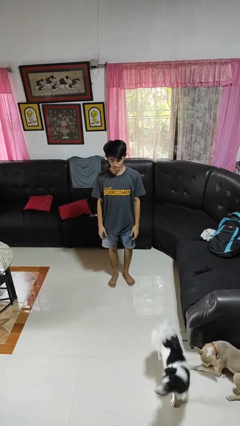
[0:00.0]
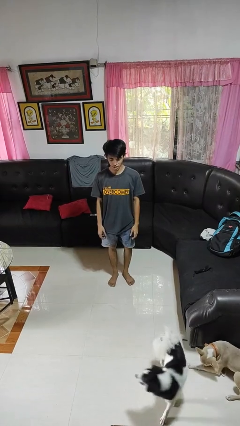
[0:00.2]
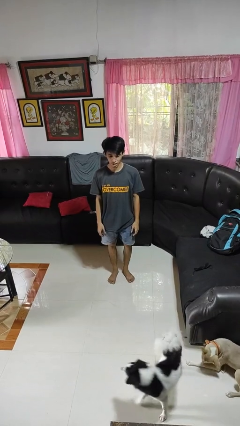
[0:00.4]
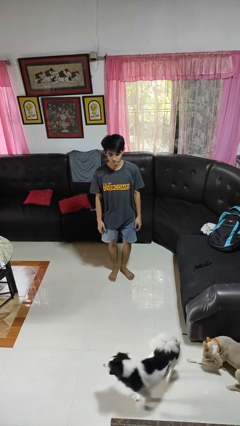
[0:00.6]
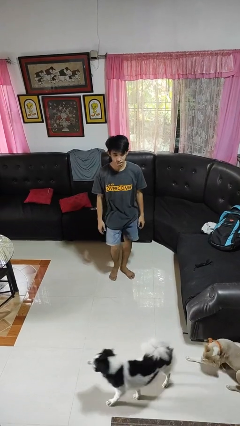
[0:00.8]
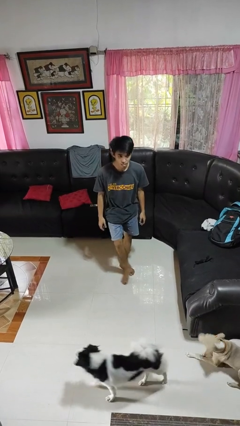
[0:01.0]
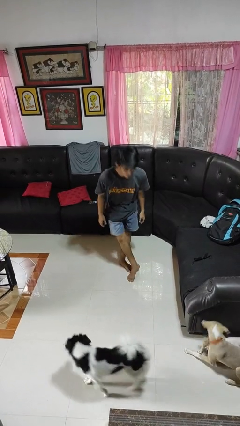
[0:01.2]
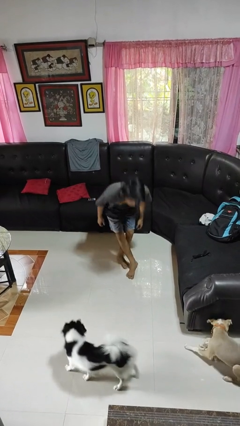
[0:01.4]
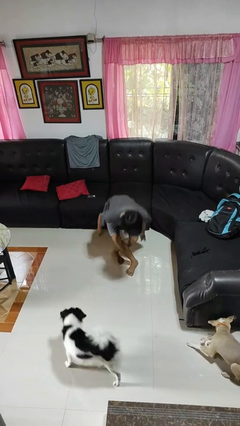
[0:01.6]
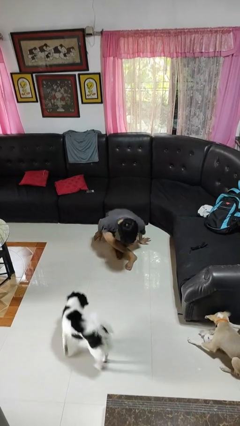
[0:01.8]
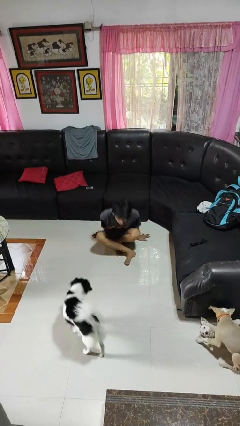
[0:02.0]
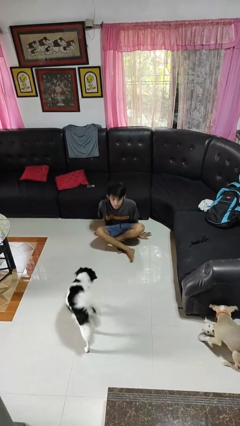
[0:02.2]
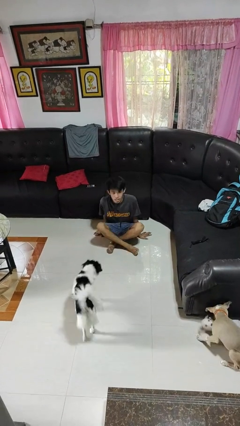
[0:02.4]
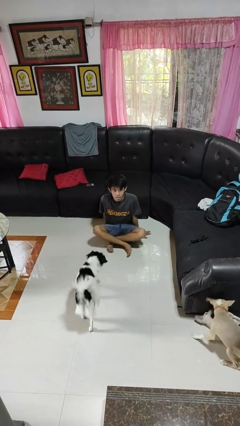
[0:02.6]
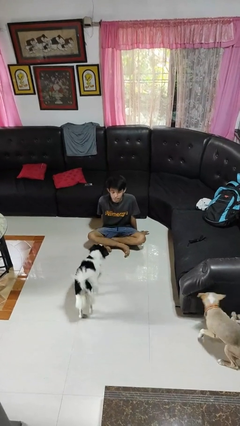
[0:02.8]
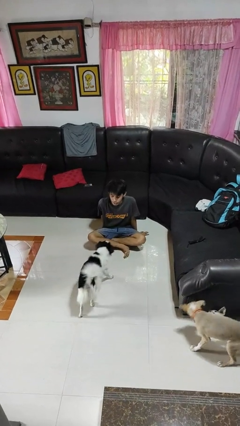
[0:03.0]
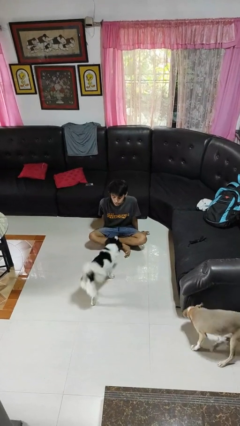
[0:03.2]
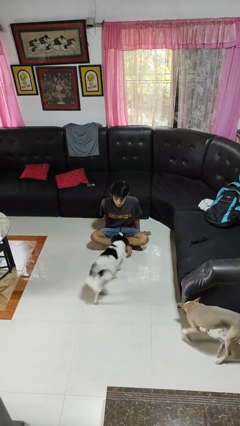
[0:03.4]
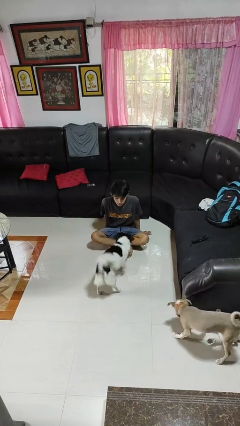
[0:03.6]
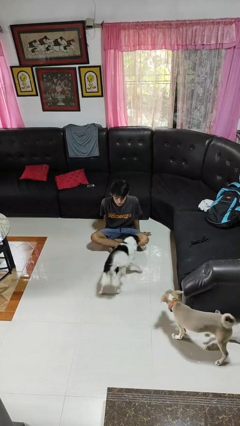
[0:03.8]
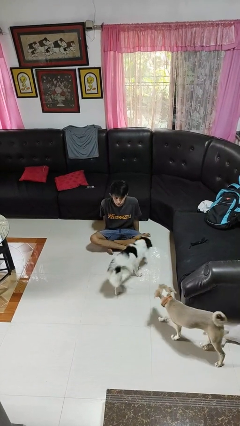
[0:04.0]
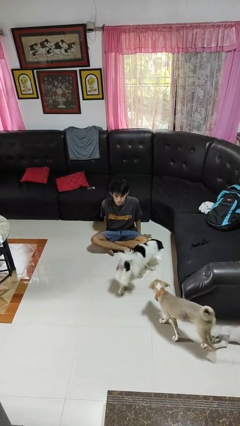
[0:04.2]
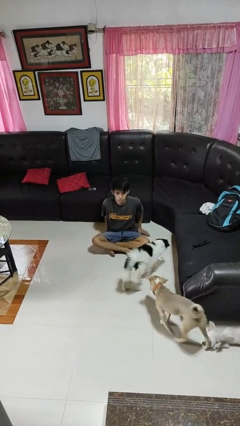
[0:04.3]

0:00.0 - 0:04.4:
person sits crisscross

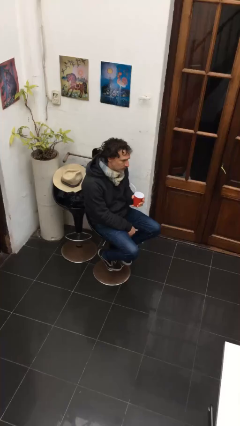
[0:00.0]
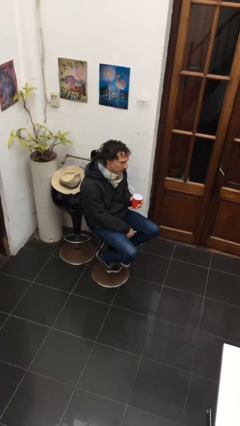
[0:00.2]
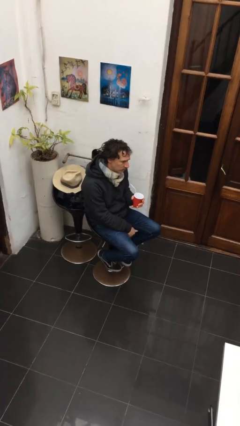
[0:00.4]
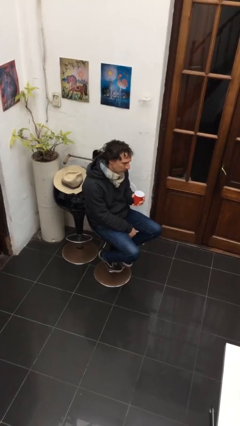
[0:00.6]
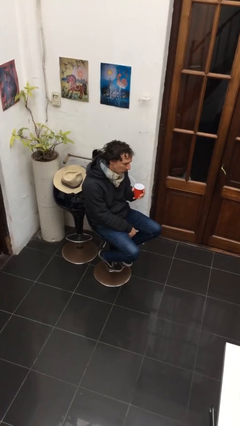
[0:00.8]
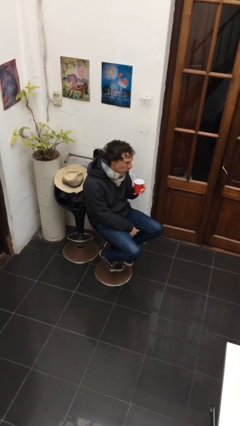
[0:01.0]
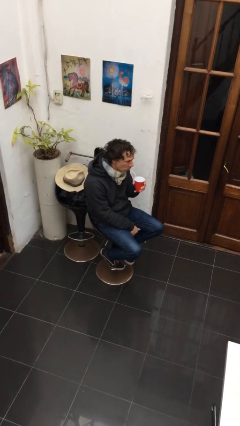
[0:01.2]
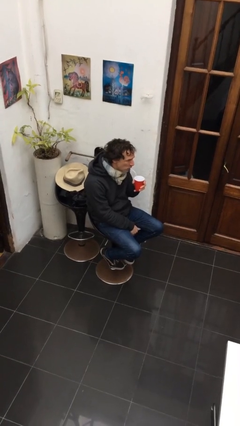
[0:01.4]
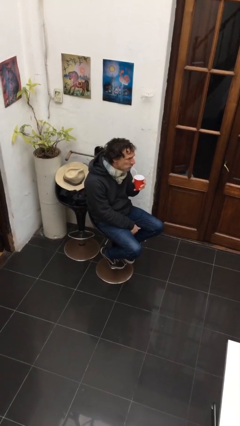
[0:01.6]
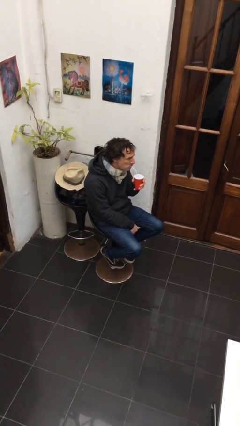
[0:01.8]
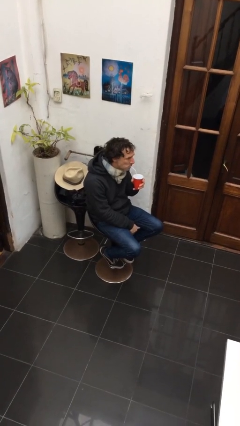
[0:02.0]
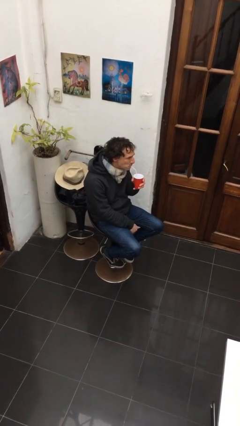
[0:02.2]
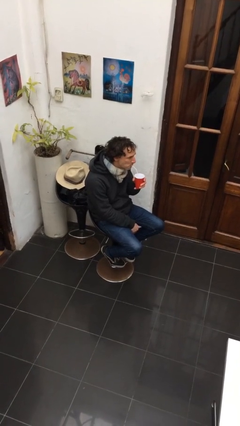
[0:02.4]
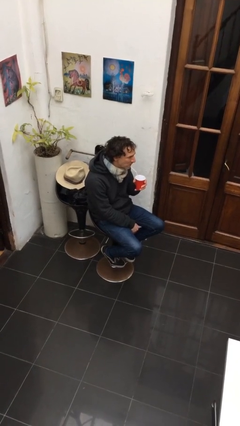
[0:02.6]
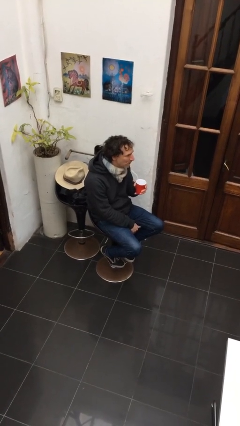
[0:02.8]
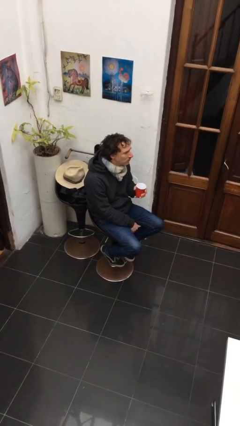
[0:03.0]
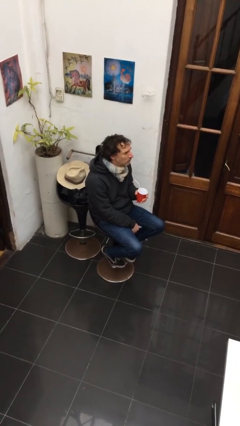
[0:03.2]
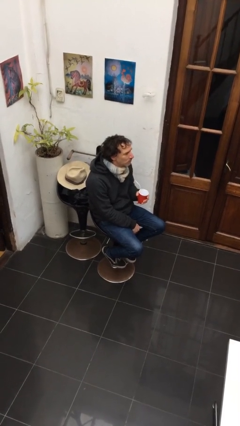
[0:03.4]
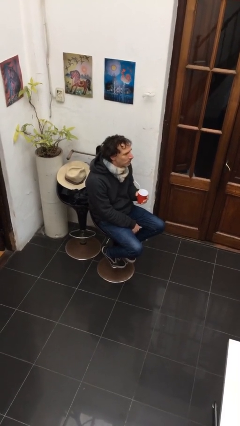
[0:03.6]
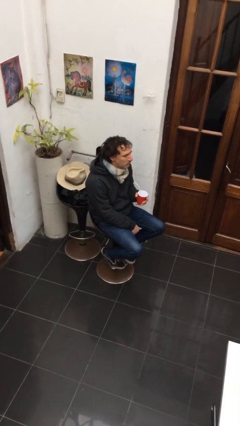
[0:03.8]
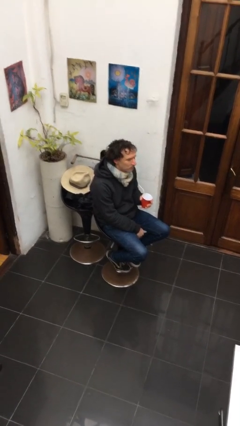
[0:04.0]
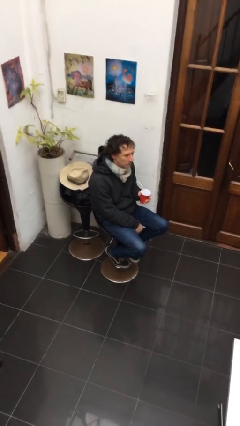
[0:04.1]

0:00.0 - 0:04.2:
person drinks from straw

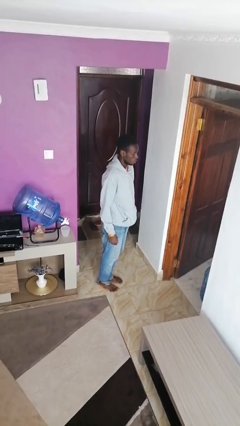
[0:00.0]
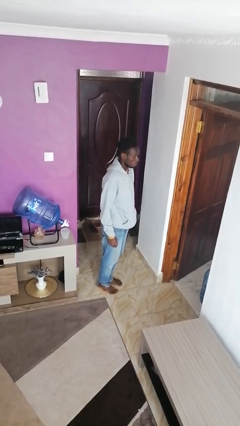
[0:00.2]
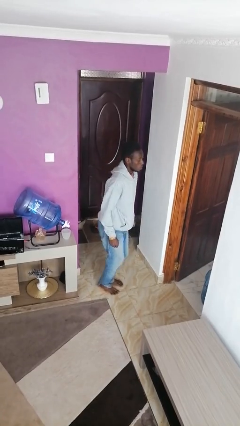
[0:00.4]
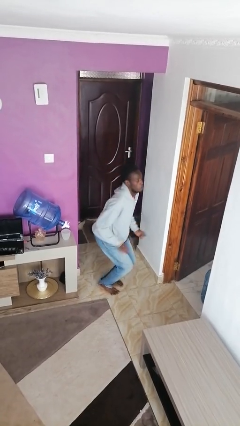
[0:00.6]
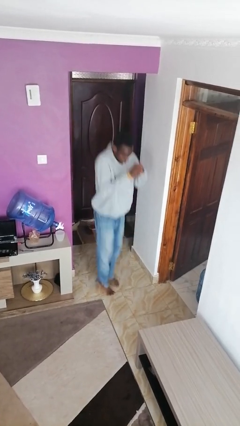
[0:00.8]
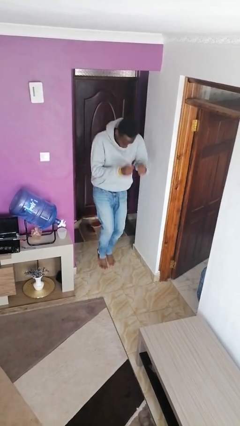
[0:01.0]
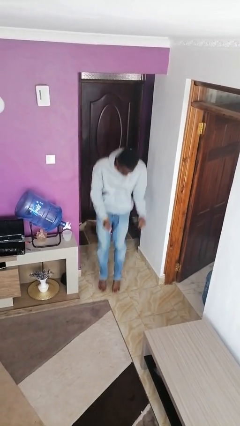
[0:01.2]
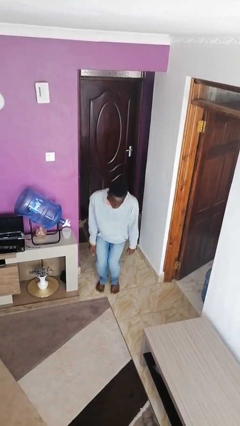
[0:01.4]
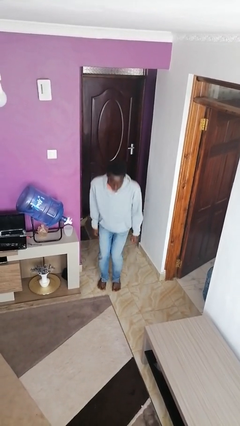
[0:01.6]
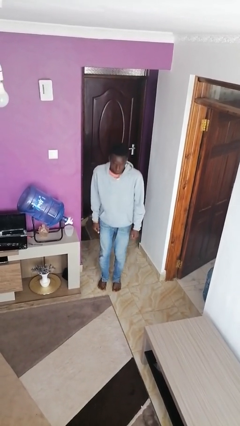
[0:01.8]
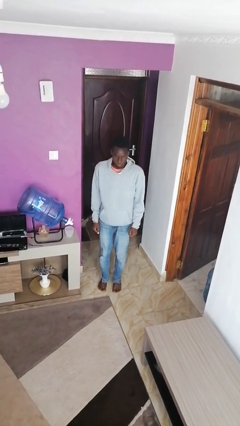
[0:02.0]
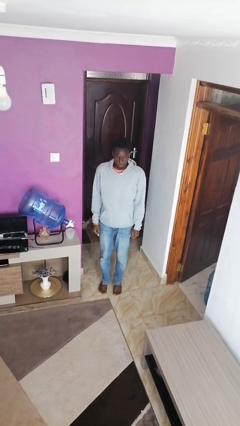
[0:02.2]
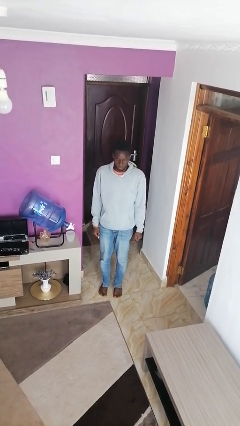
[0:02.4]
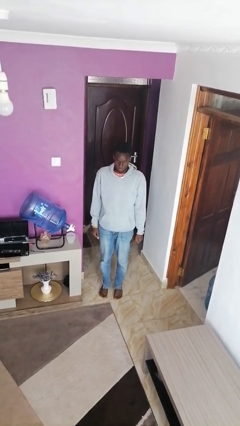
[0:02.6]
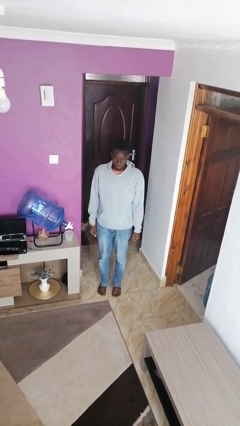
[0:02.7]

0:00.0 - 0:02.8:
person jumps

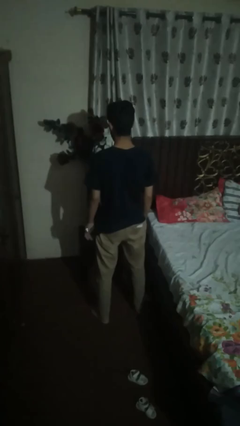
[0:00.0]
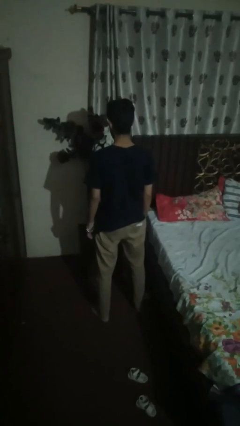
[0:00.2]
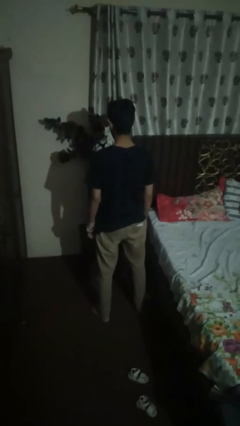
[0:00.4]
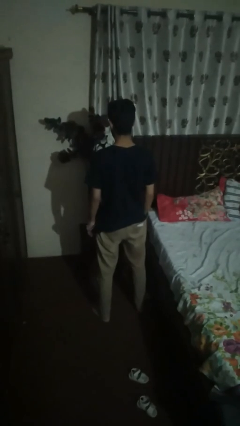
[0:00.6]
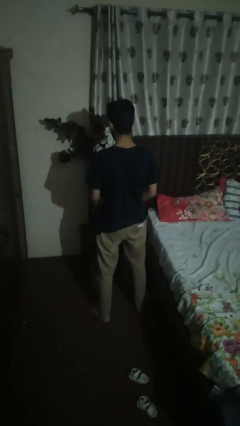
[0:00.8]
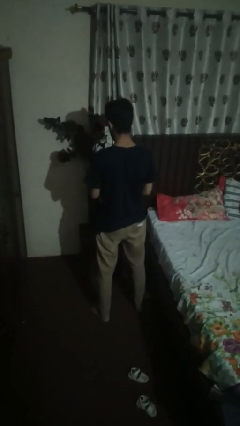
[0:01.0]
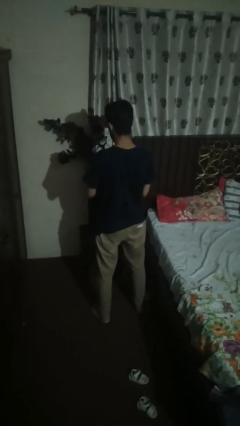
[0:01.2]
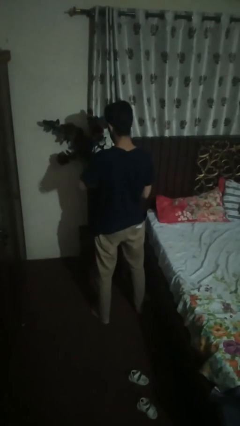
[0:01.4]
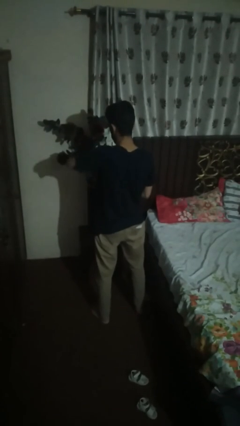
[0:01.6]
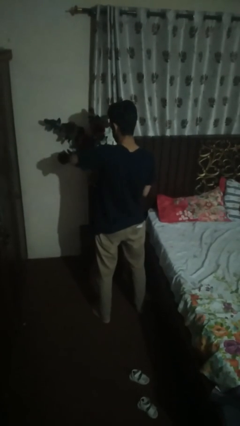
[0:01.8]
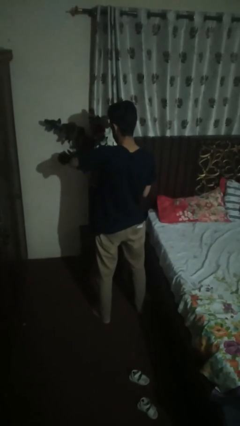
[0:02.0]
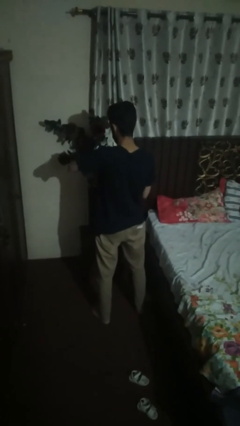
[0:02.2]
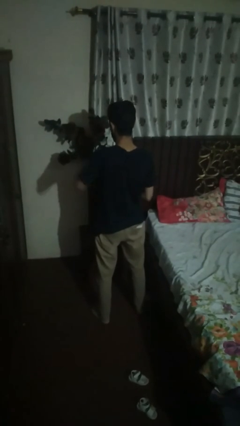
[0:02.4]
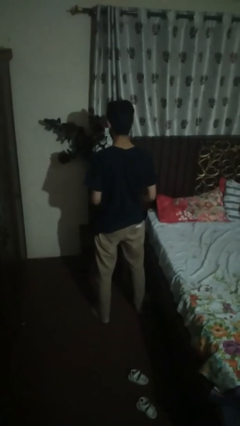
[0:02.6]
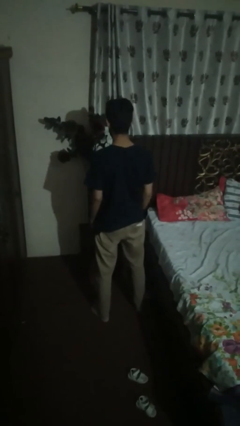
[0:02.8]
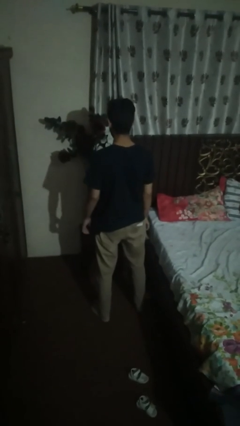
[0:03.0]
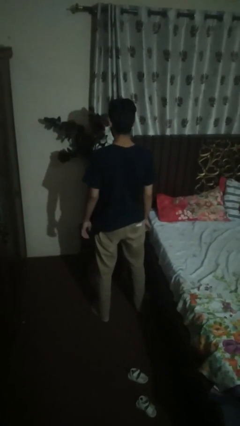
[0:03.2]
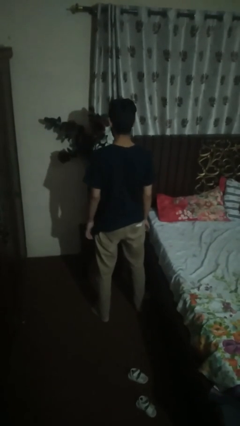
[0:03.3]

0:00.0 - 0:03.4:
person takes off wristwatch

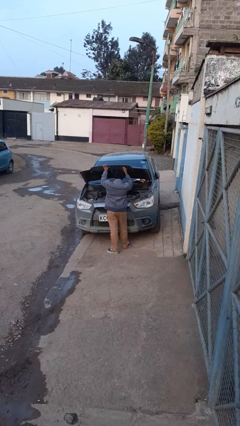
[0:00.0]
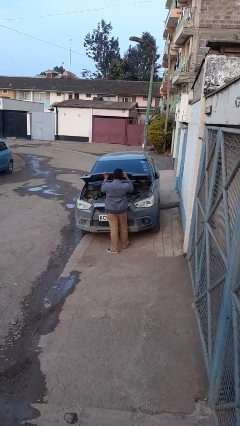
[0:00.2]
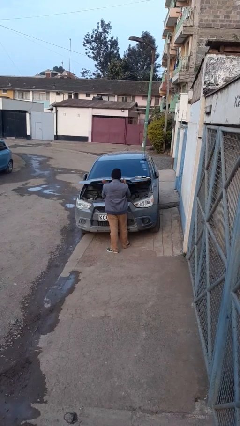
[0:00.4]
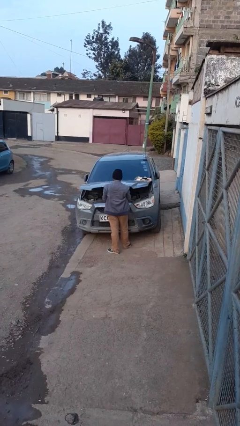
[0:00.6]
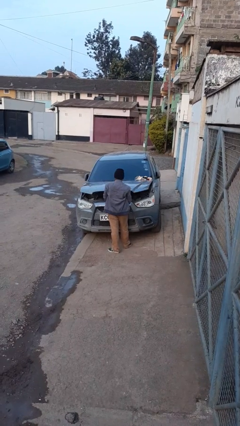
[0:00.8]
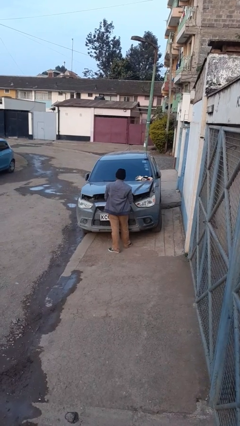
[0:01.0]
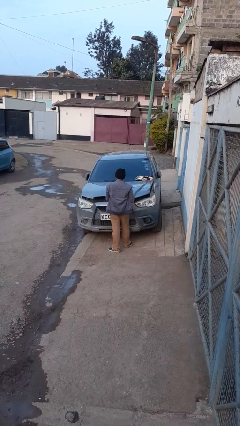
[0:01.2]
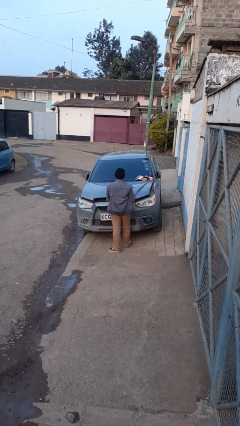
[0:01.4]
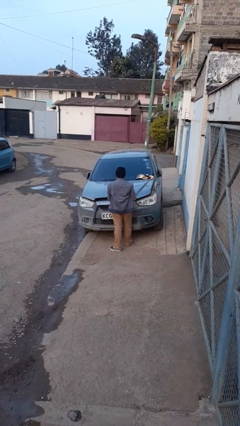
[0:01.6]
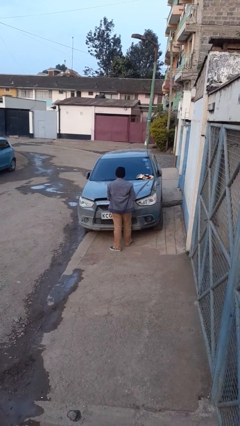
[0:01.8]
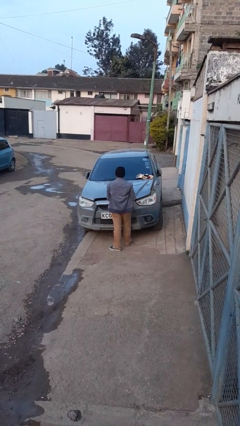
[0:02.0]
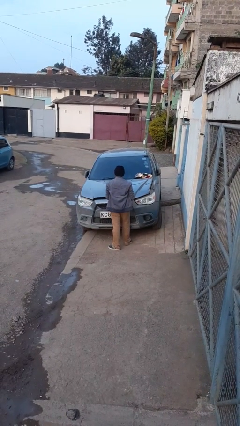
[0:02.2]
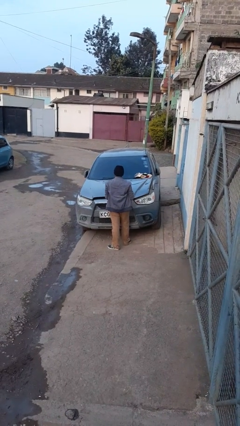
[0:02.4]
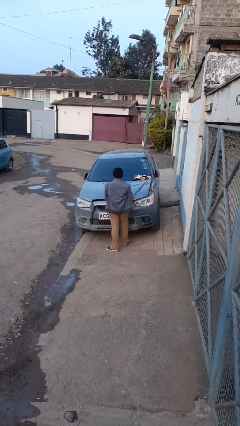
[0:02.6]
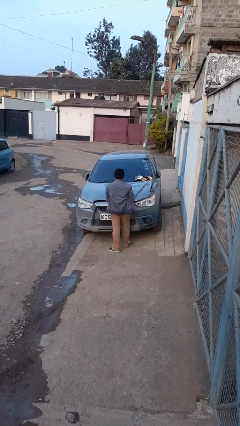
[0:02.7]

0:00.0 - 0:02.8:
person closes car hood
